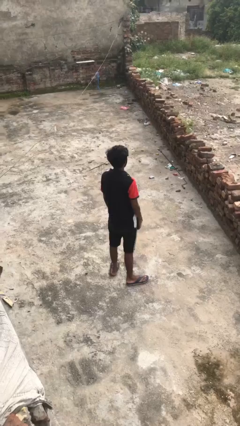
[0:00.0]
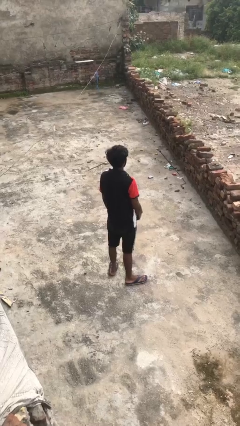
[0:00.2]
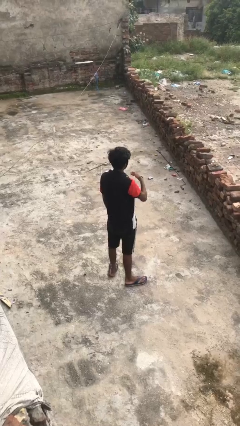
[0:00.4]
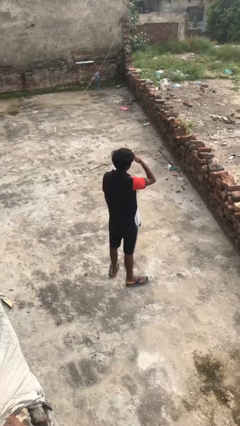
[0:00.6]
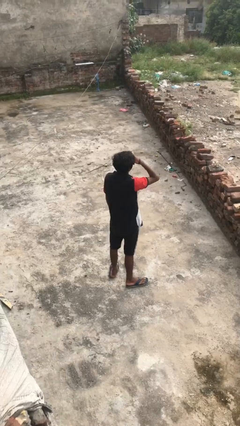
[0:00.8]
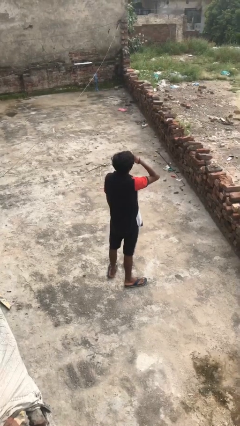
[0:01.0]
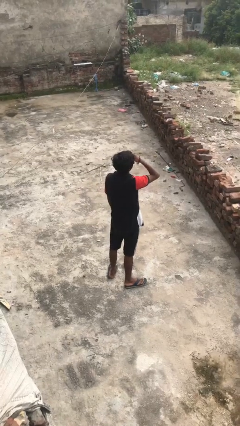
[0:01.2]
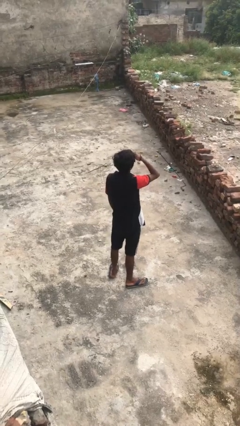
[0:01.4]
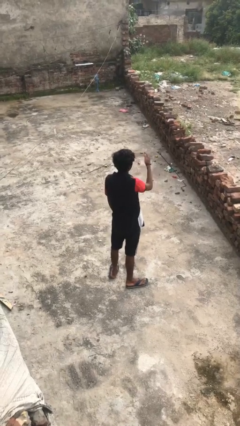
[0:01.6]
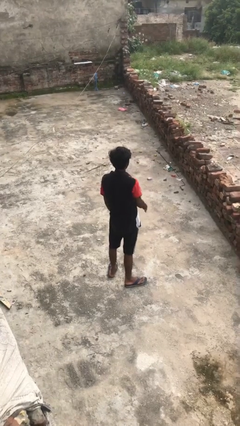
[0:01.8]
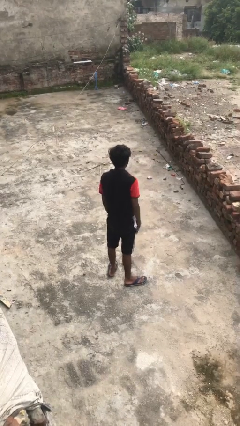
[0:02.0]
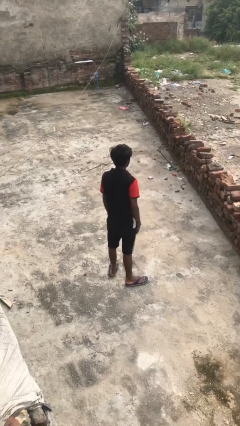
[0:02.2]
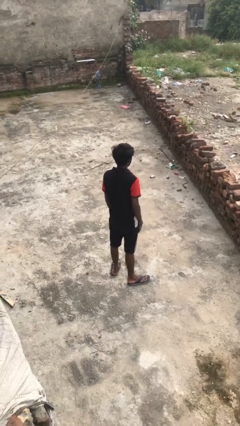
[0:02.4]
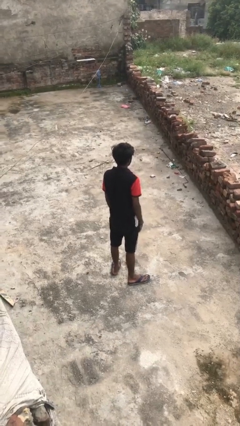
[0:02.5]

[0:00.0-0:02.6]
person shades eyes

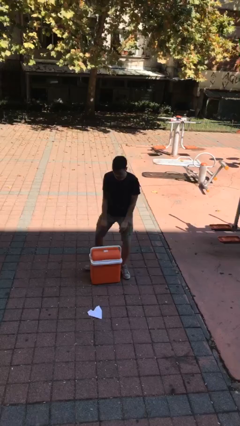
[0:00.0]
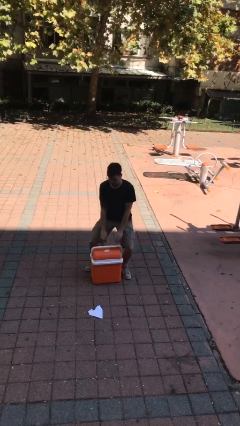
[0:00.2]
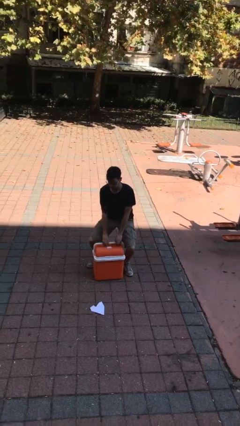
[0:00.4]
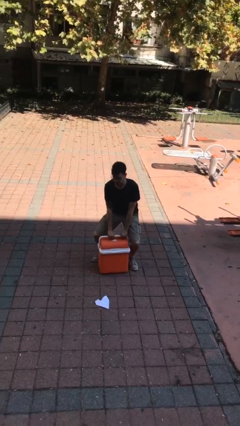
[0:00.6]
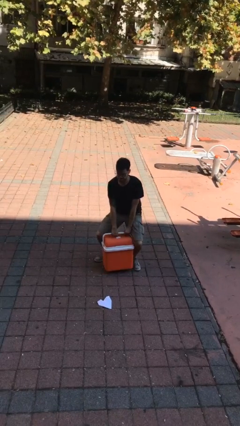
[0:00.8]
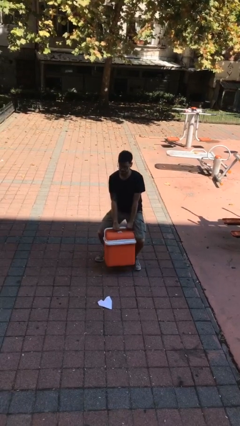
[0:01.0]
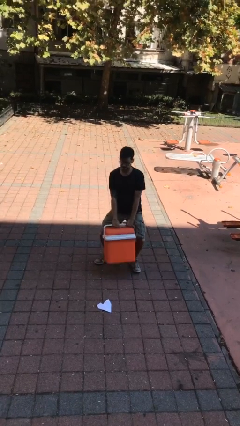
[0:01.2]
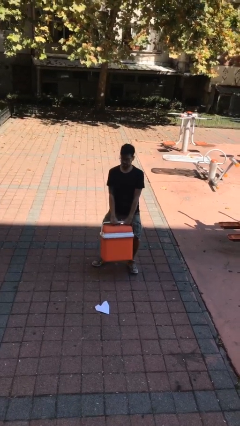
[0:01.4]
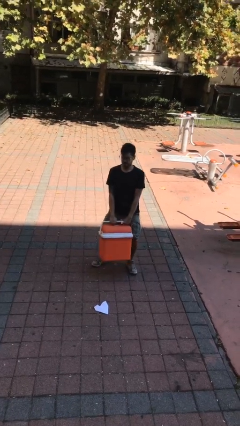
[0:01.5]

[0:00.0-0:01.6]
person picks up object from floor

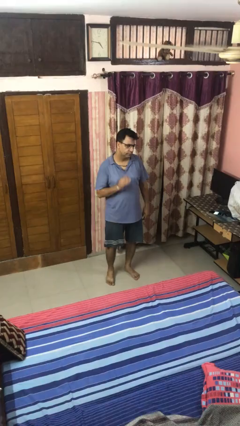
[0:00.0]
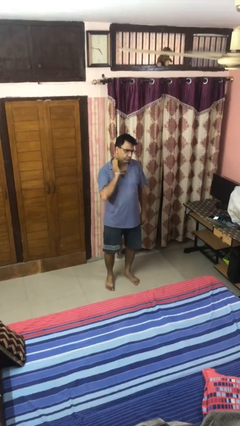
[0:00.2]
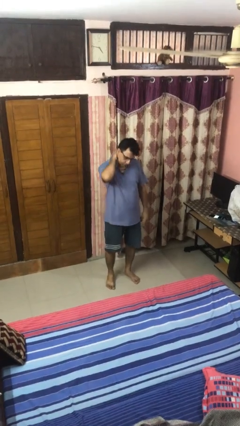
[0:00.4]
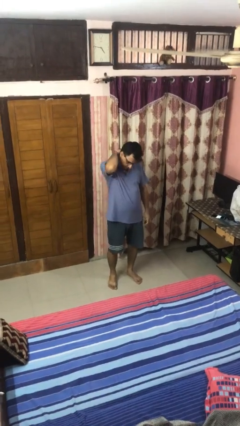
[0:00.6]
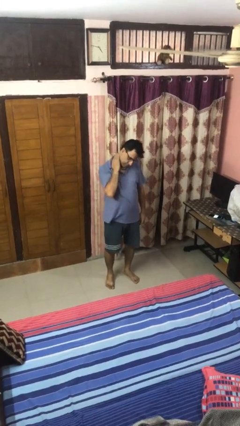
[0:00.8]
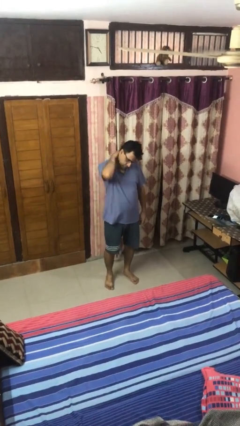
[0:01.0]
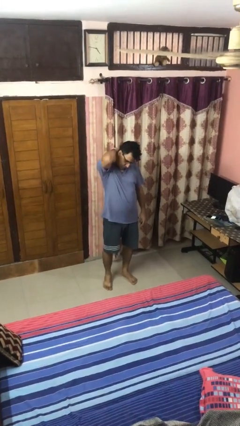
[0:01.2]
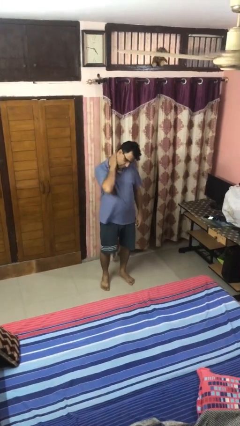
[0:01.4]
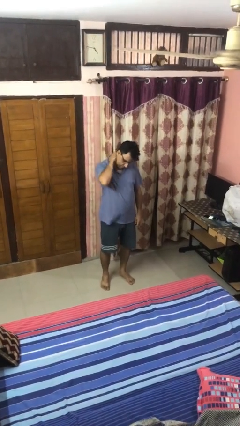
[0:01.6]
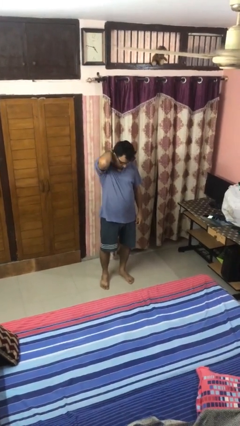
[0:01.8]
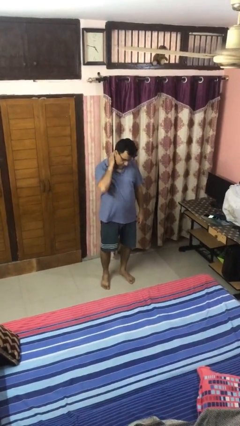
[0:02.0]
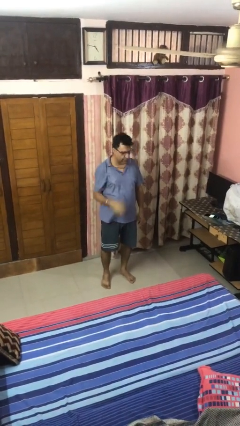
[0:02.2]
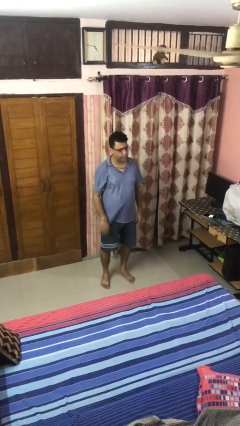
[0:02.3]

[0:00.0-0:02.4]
person rubs neck

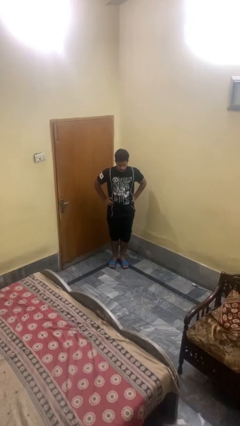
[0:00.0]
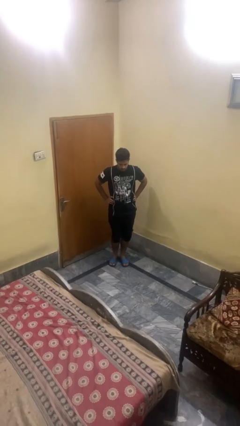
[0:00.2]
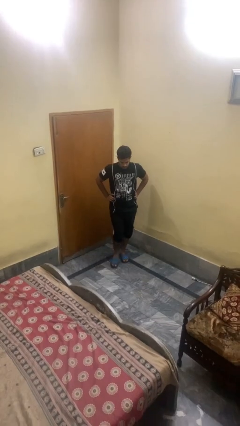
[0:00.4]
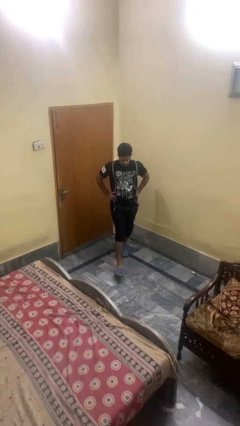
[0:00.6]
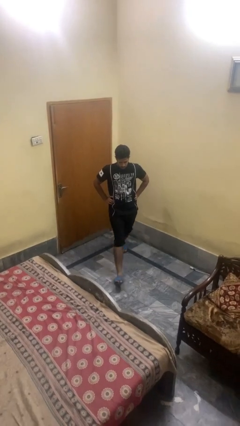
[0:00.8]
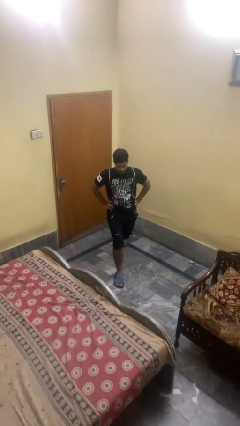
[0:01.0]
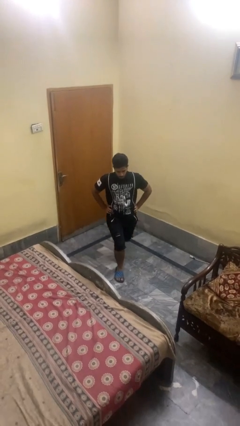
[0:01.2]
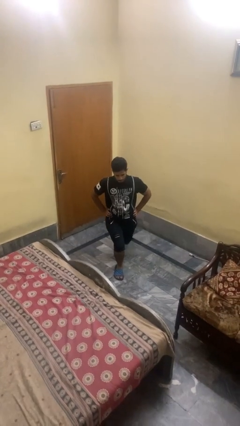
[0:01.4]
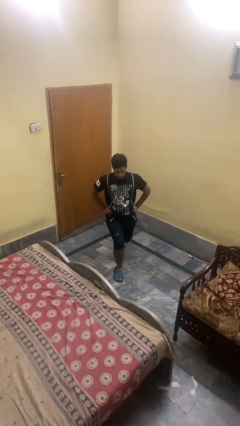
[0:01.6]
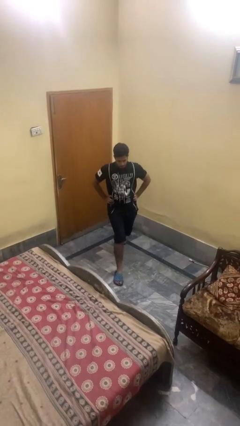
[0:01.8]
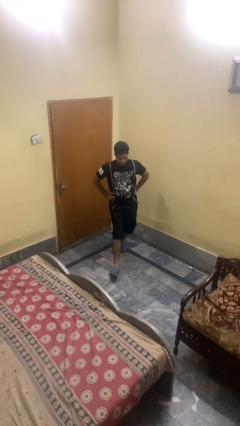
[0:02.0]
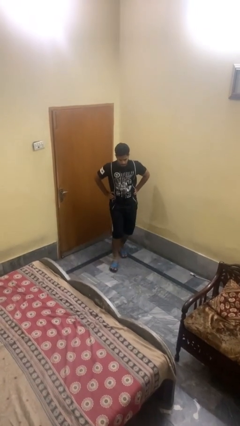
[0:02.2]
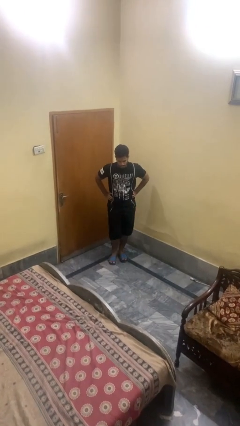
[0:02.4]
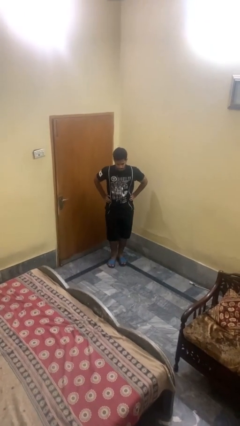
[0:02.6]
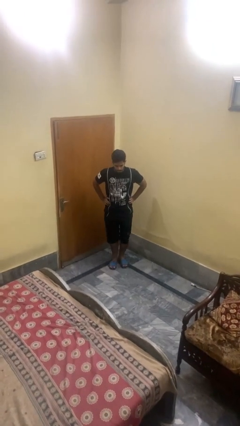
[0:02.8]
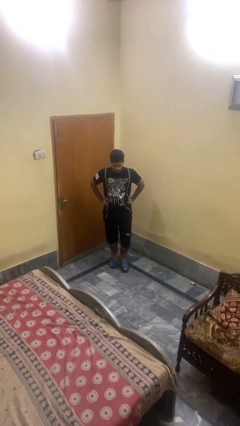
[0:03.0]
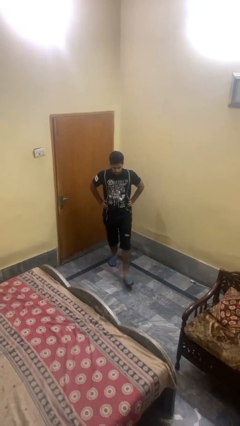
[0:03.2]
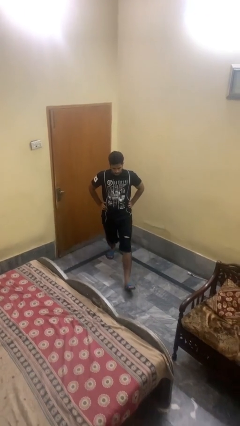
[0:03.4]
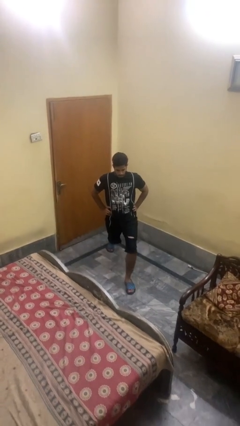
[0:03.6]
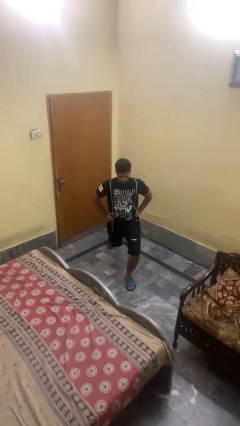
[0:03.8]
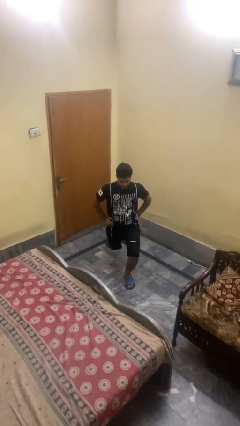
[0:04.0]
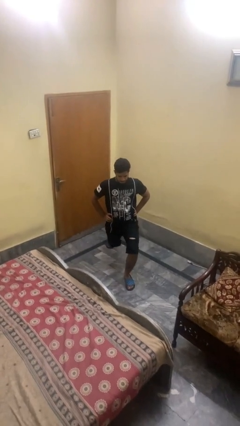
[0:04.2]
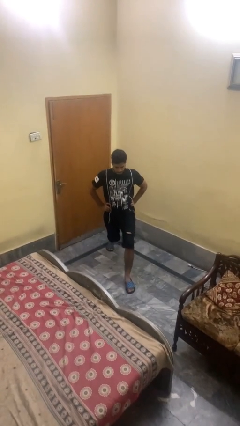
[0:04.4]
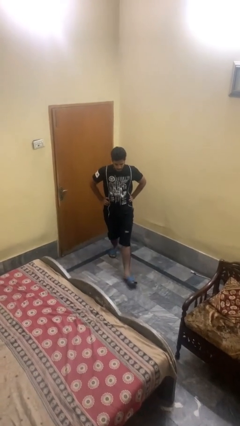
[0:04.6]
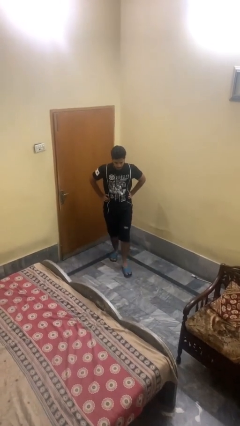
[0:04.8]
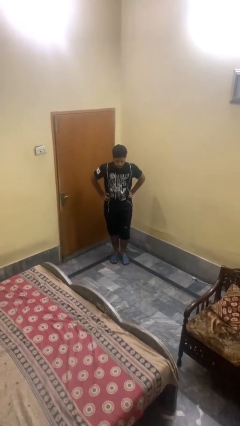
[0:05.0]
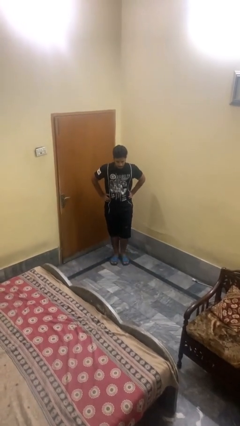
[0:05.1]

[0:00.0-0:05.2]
person exercises with lunges

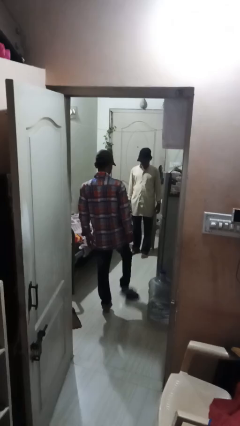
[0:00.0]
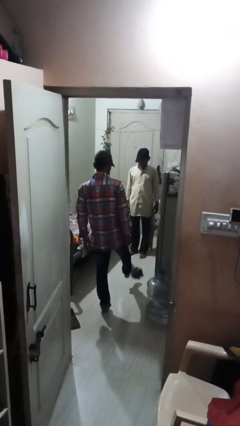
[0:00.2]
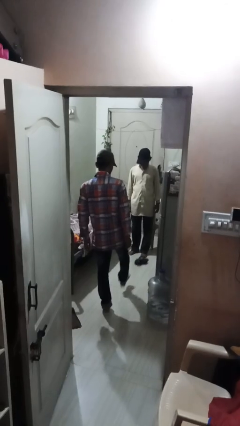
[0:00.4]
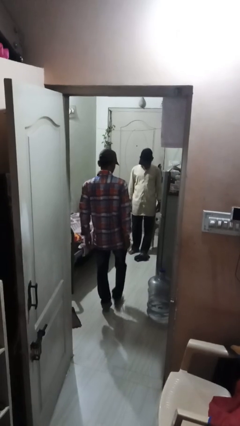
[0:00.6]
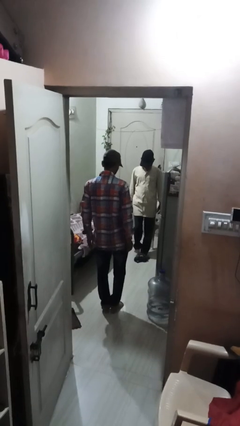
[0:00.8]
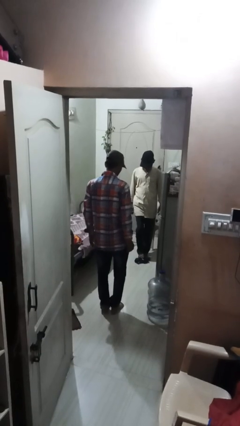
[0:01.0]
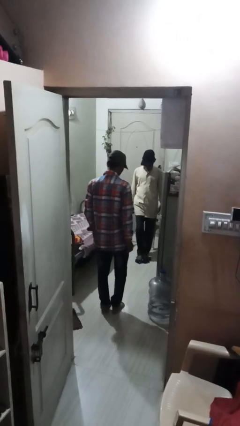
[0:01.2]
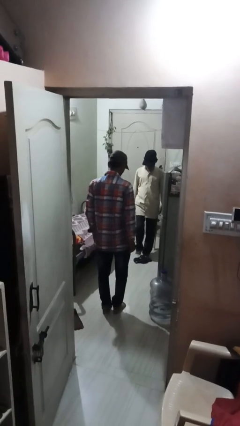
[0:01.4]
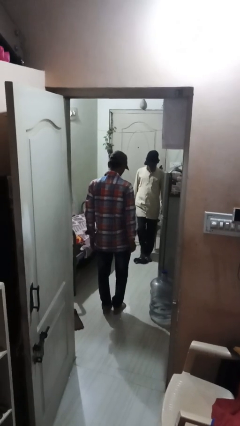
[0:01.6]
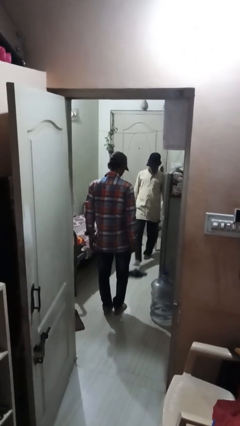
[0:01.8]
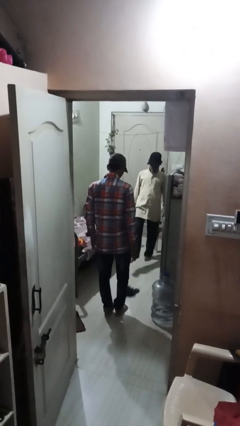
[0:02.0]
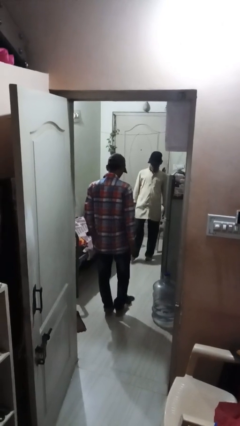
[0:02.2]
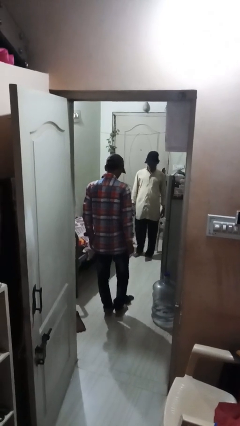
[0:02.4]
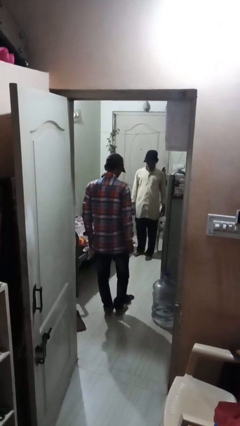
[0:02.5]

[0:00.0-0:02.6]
person kicks object to person

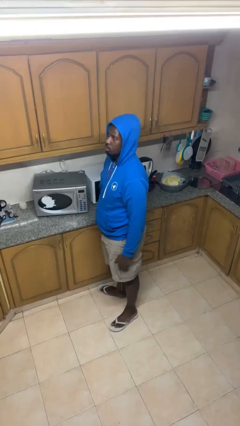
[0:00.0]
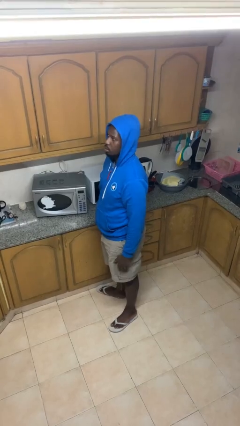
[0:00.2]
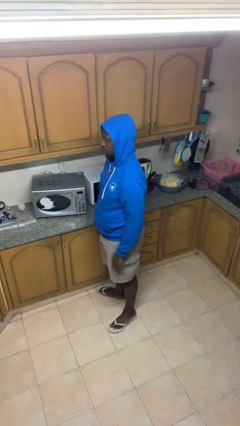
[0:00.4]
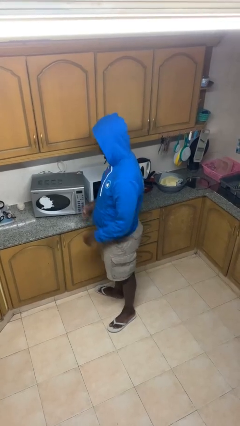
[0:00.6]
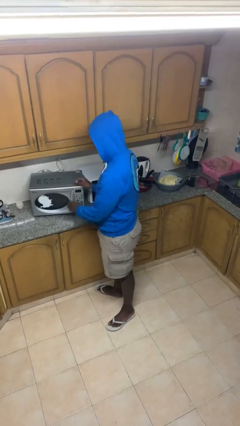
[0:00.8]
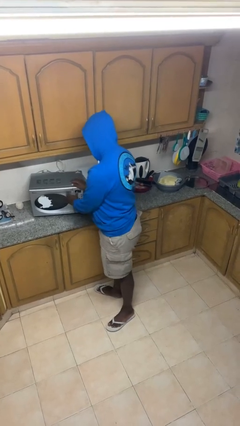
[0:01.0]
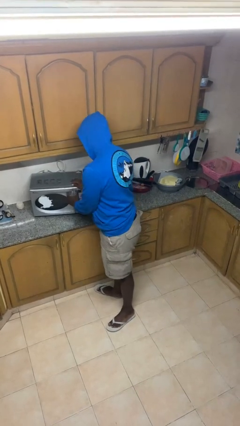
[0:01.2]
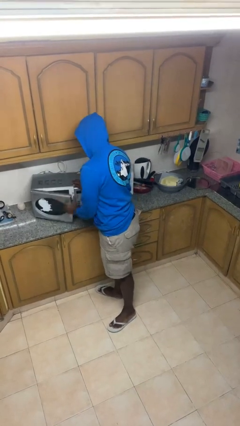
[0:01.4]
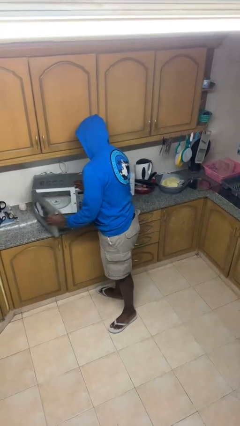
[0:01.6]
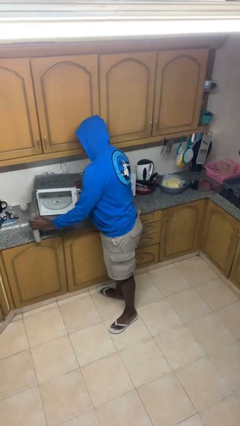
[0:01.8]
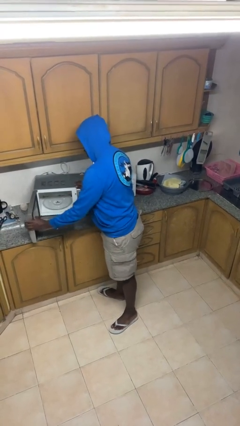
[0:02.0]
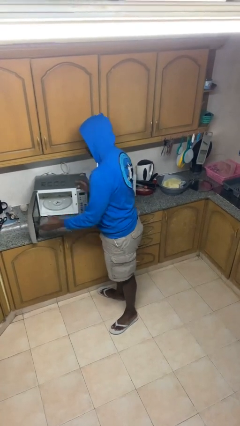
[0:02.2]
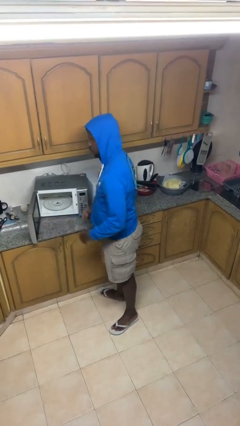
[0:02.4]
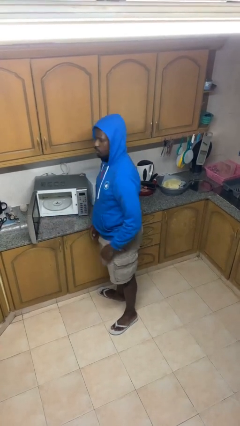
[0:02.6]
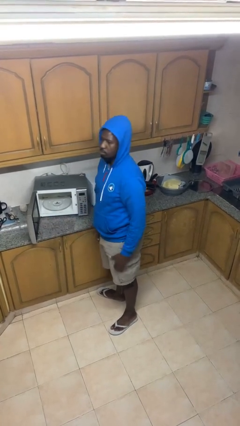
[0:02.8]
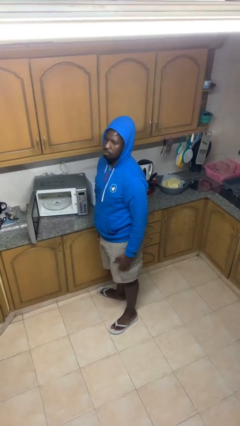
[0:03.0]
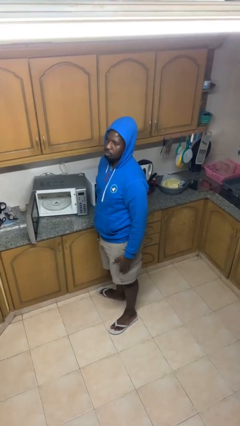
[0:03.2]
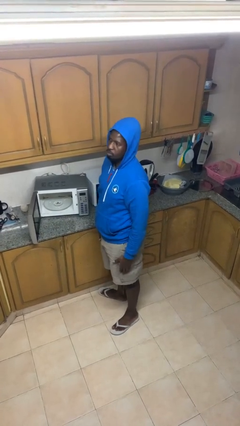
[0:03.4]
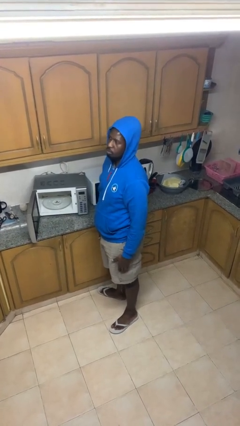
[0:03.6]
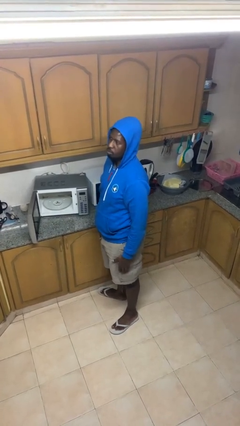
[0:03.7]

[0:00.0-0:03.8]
person opens microwave
